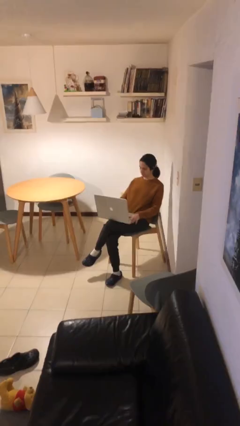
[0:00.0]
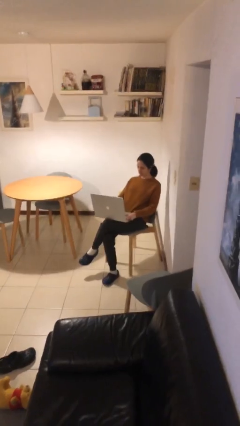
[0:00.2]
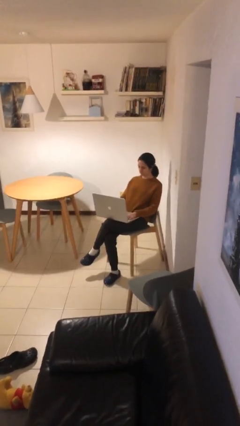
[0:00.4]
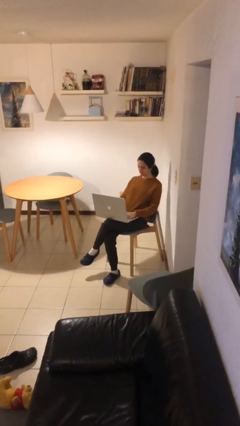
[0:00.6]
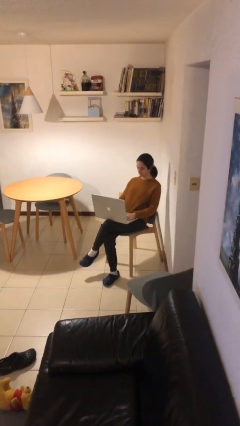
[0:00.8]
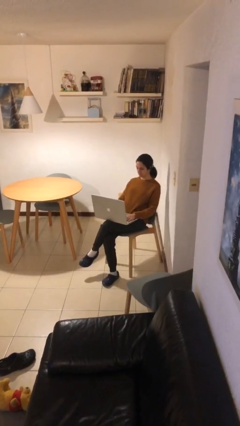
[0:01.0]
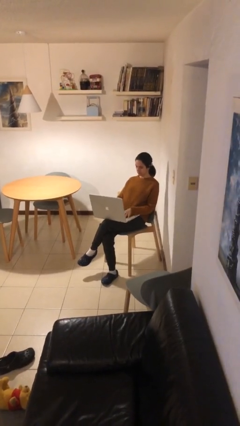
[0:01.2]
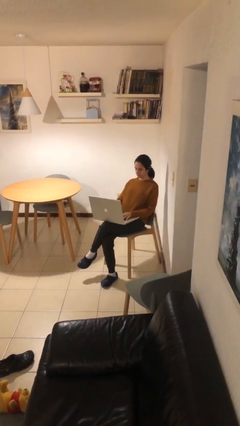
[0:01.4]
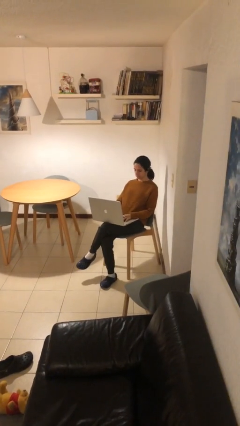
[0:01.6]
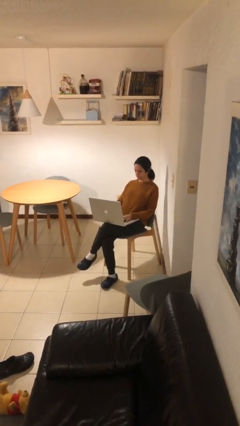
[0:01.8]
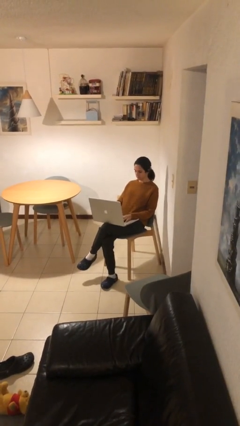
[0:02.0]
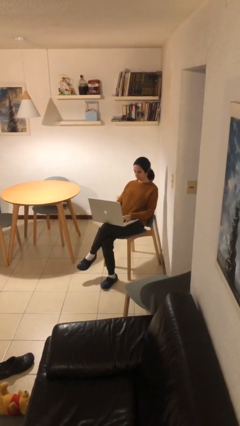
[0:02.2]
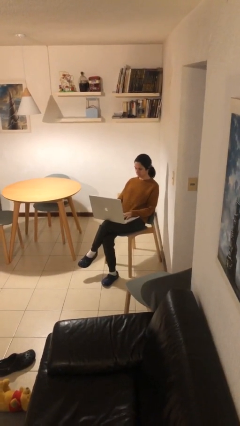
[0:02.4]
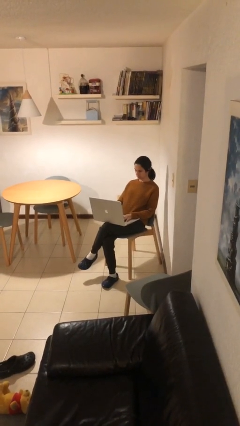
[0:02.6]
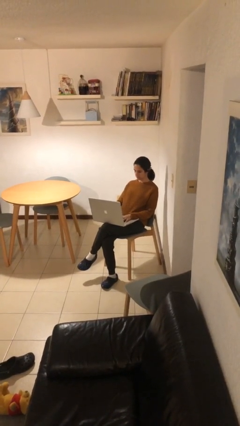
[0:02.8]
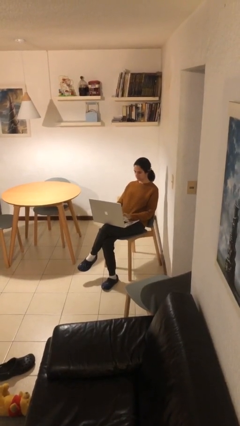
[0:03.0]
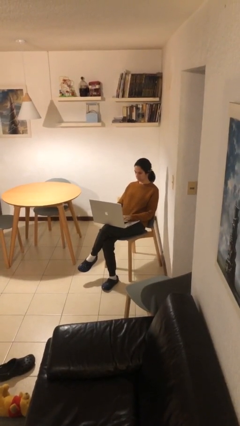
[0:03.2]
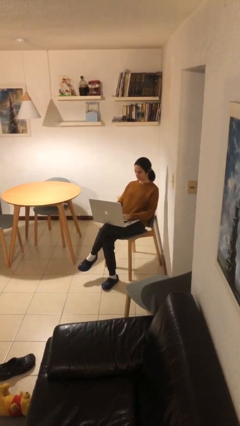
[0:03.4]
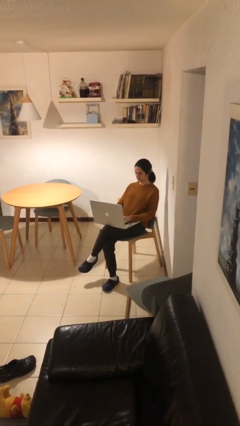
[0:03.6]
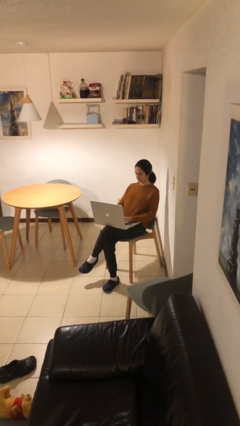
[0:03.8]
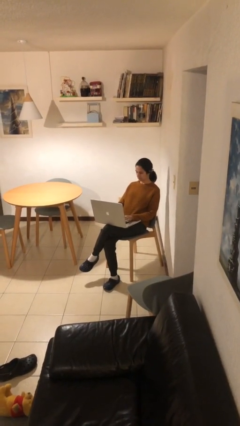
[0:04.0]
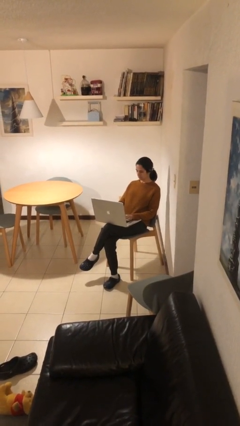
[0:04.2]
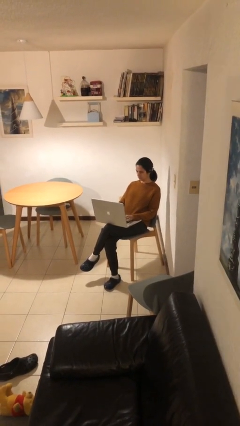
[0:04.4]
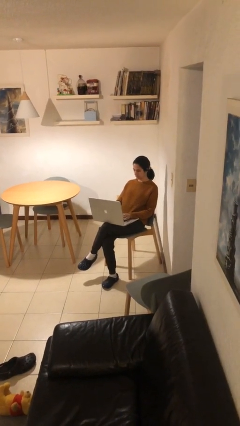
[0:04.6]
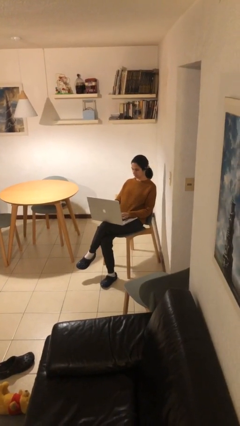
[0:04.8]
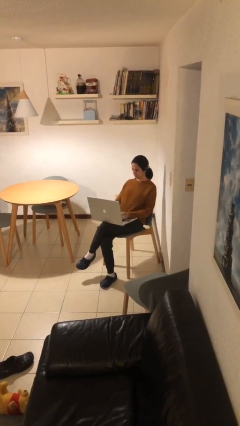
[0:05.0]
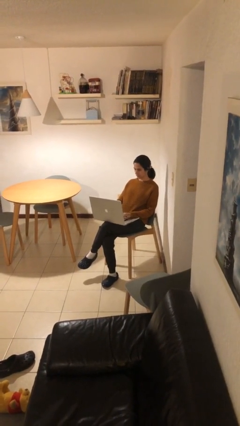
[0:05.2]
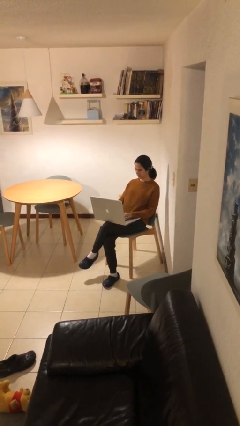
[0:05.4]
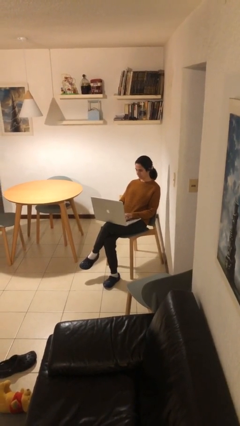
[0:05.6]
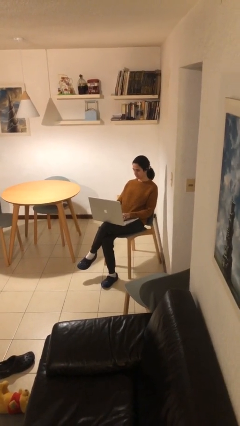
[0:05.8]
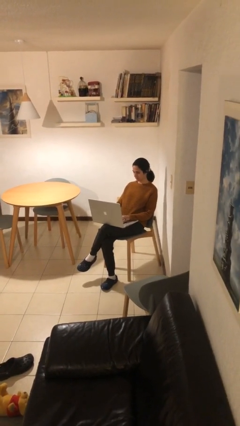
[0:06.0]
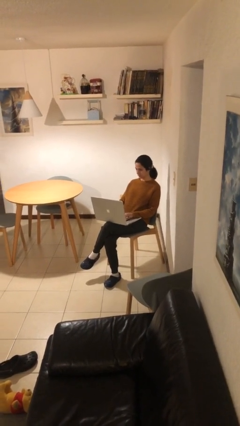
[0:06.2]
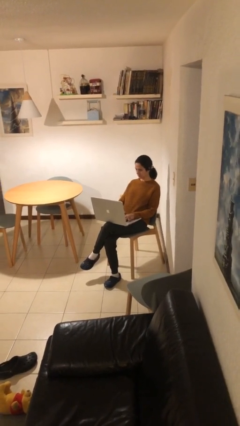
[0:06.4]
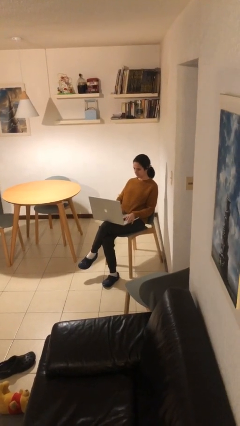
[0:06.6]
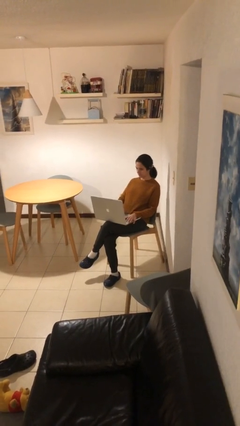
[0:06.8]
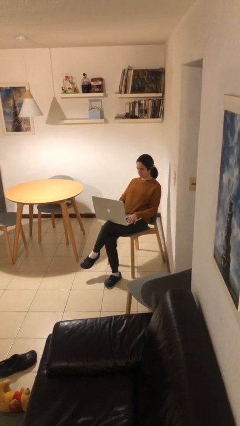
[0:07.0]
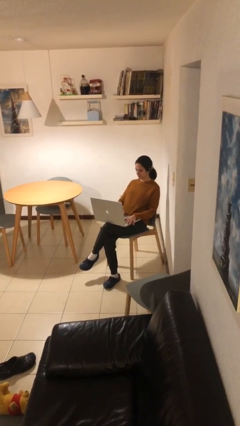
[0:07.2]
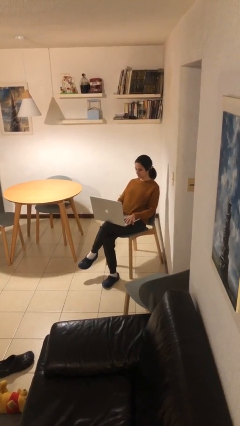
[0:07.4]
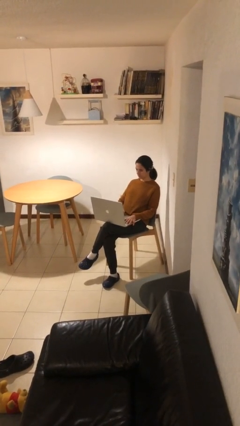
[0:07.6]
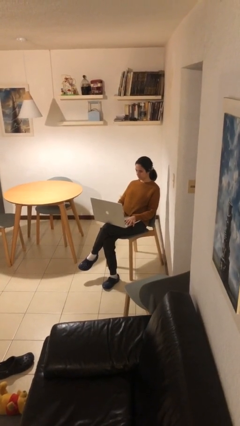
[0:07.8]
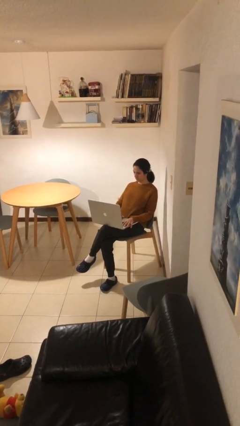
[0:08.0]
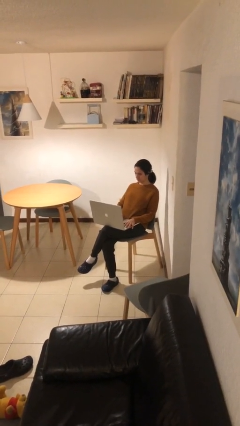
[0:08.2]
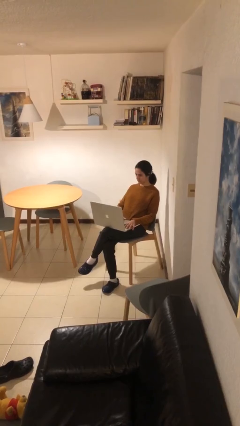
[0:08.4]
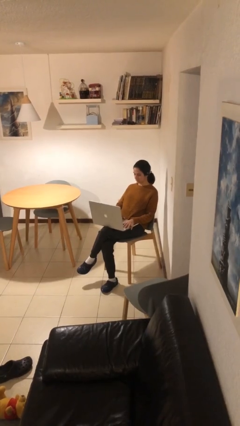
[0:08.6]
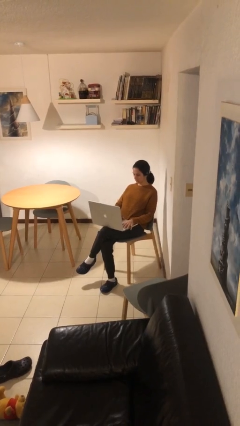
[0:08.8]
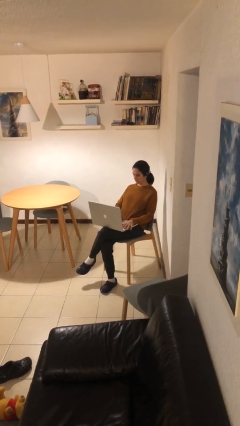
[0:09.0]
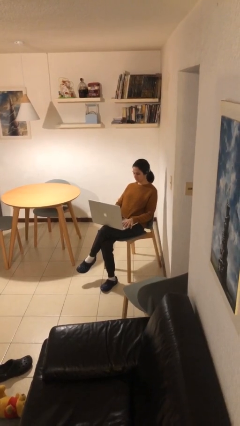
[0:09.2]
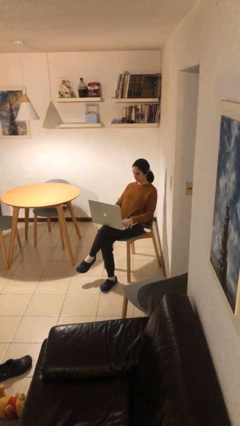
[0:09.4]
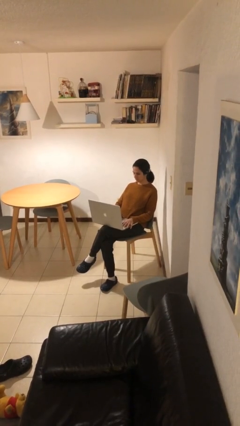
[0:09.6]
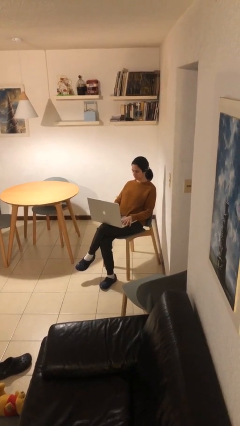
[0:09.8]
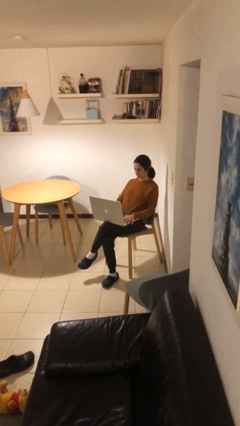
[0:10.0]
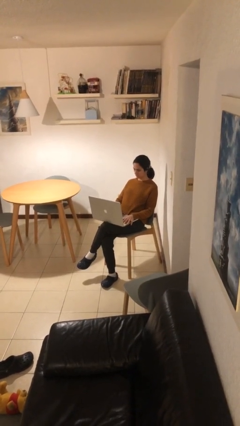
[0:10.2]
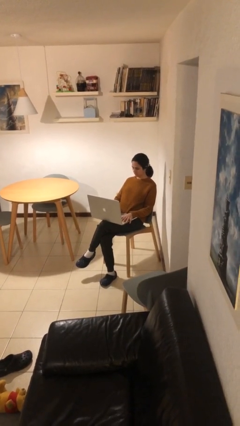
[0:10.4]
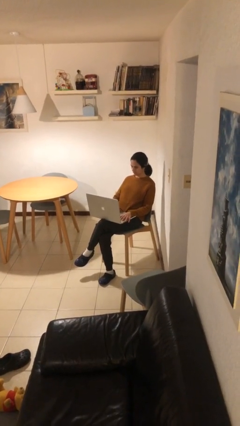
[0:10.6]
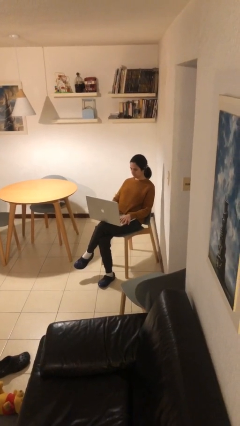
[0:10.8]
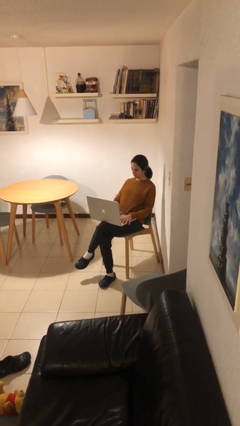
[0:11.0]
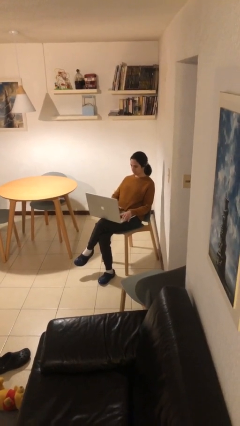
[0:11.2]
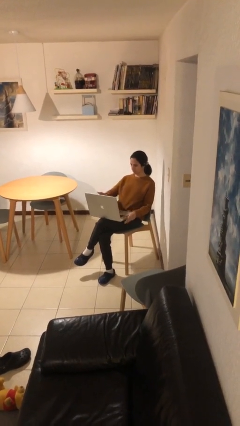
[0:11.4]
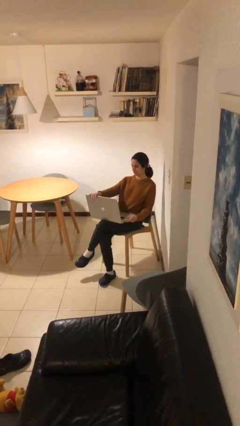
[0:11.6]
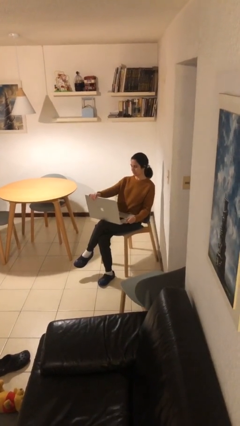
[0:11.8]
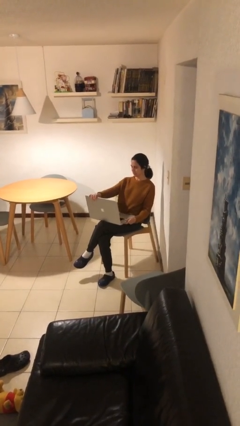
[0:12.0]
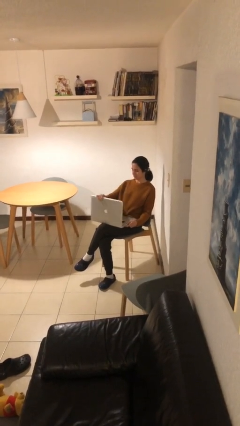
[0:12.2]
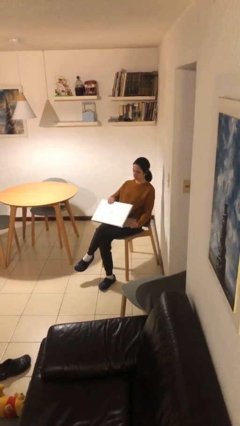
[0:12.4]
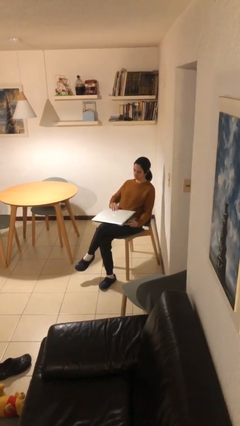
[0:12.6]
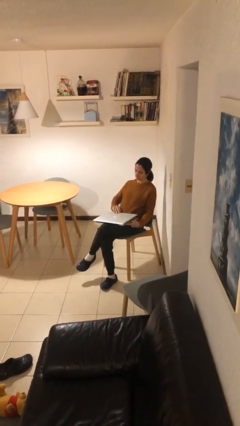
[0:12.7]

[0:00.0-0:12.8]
person interacts with laptop

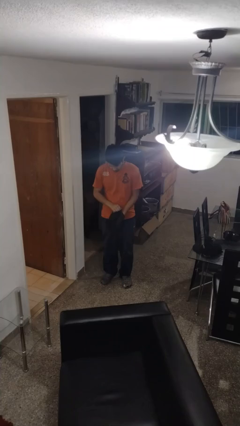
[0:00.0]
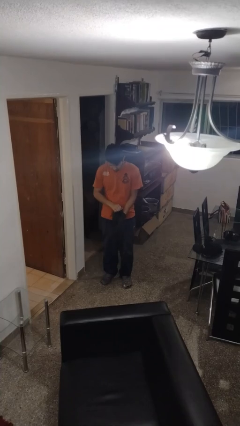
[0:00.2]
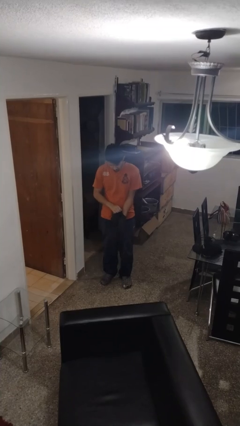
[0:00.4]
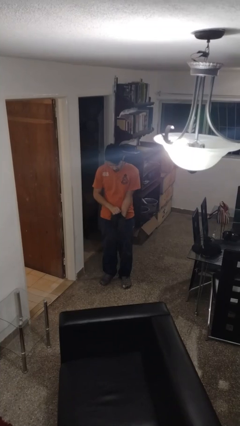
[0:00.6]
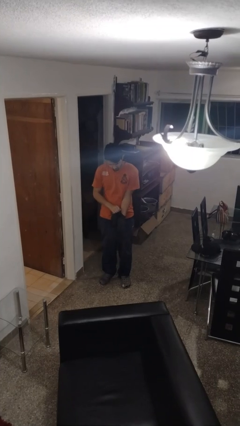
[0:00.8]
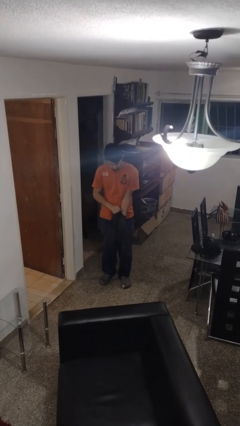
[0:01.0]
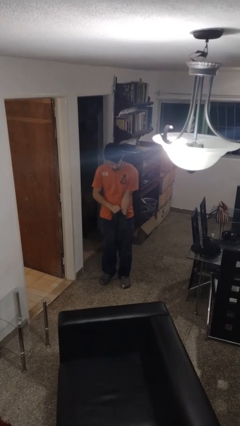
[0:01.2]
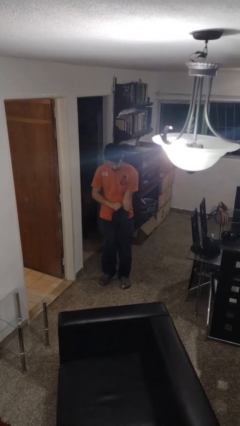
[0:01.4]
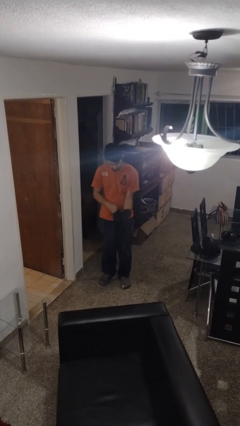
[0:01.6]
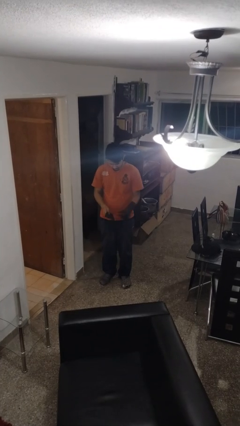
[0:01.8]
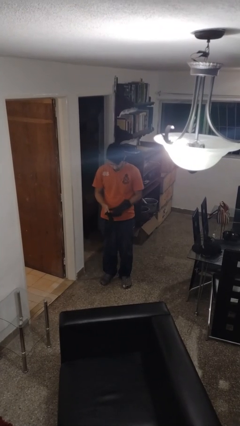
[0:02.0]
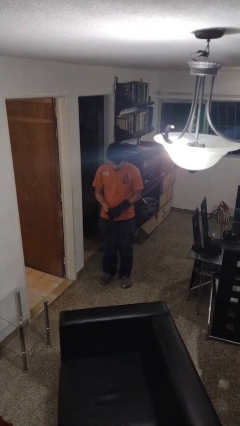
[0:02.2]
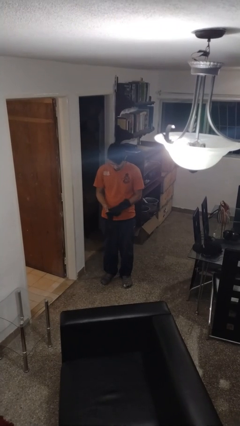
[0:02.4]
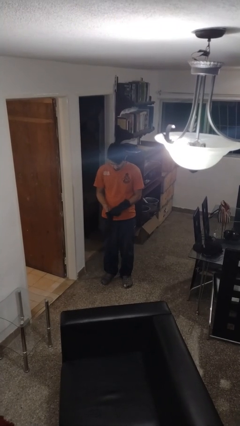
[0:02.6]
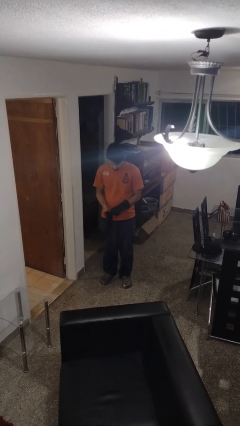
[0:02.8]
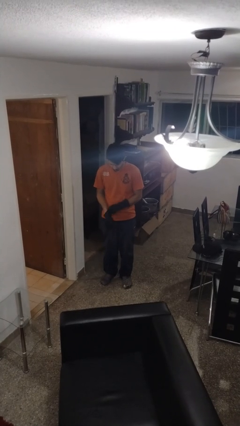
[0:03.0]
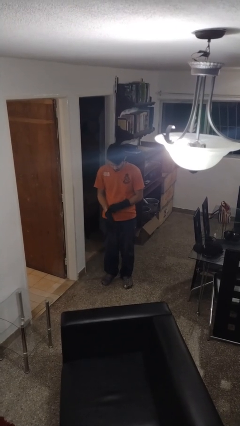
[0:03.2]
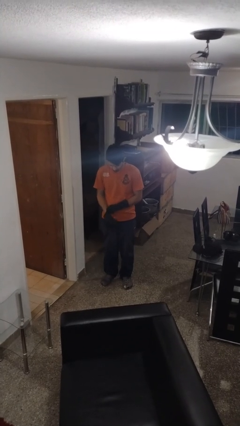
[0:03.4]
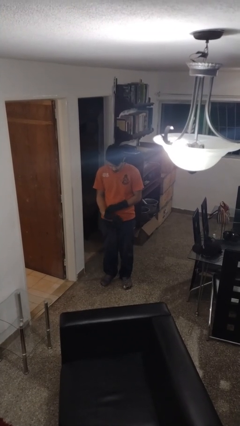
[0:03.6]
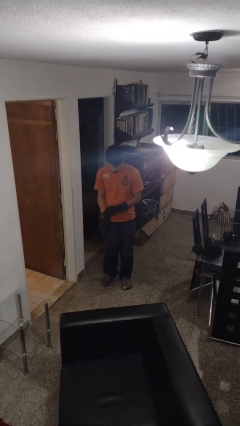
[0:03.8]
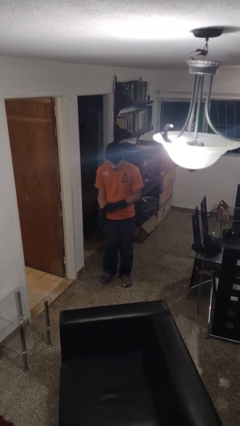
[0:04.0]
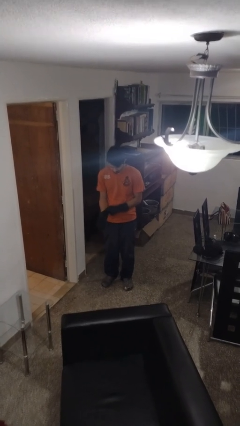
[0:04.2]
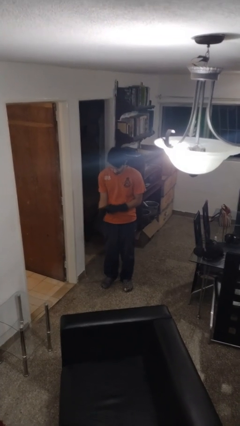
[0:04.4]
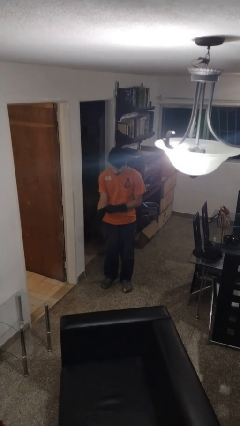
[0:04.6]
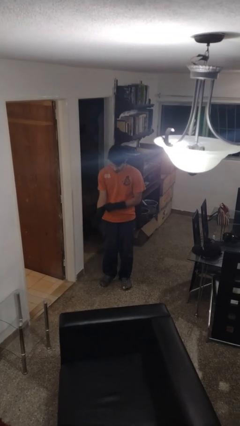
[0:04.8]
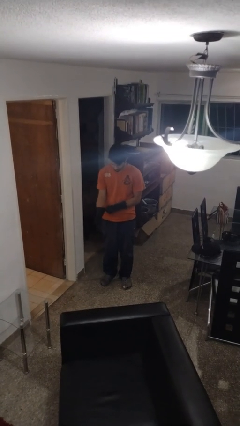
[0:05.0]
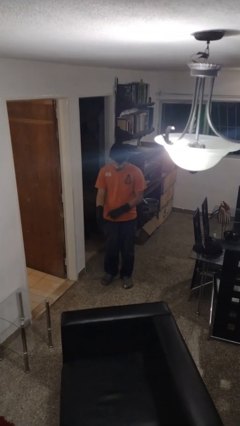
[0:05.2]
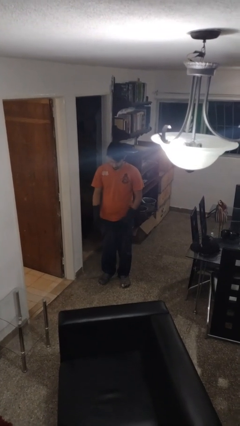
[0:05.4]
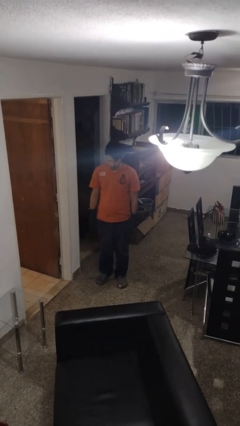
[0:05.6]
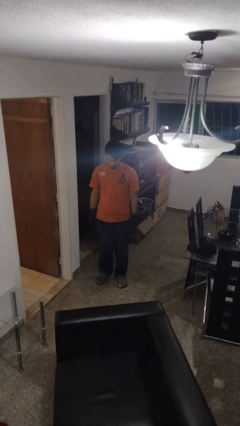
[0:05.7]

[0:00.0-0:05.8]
person puts on gloves
